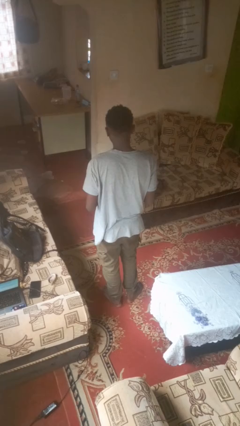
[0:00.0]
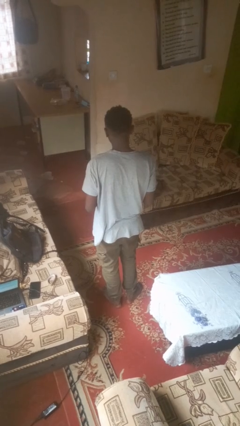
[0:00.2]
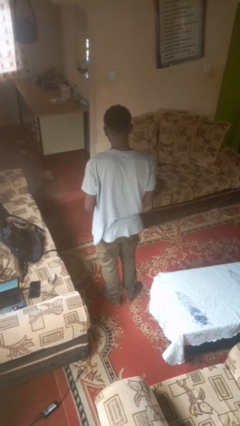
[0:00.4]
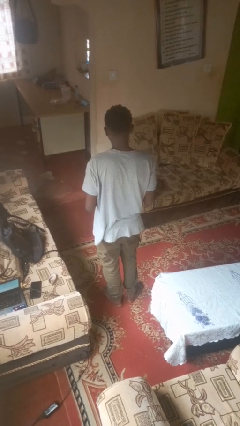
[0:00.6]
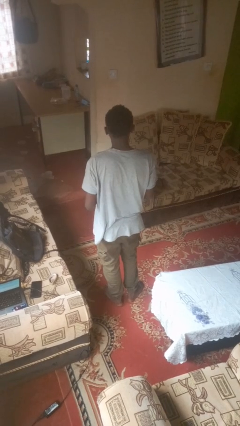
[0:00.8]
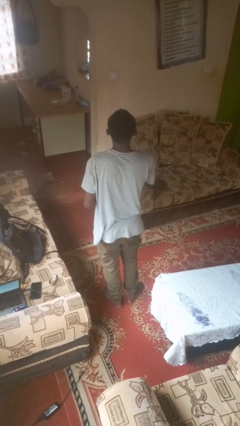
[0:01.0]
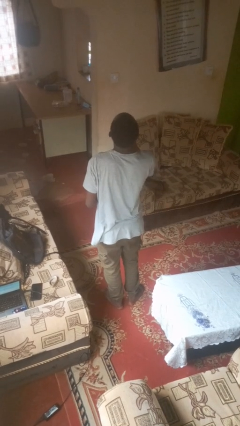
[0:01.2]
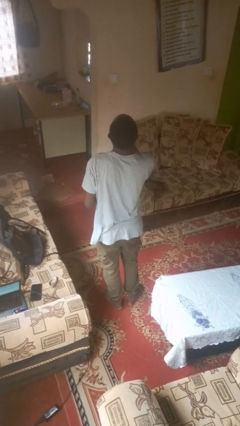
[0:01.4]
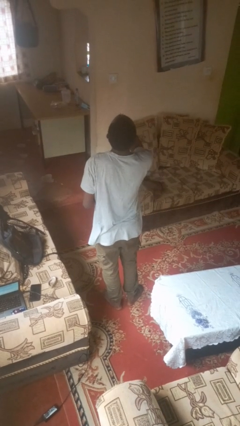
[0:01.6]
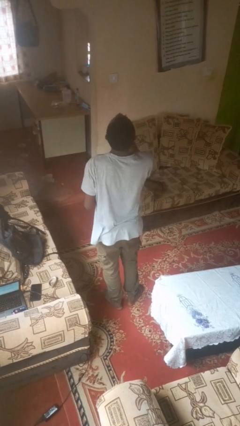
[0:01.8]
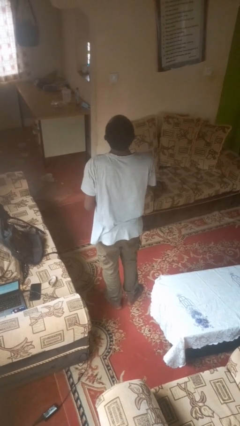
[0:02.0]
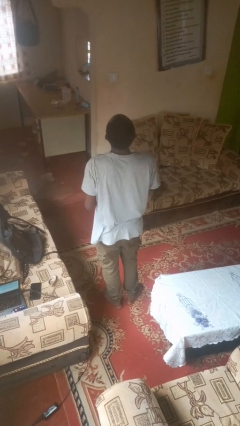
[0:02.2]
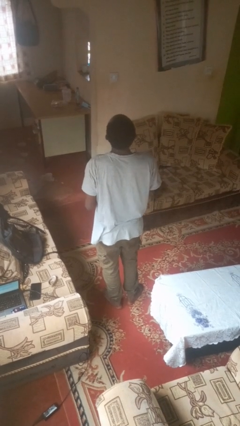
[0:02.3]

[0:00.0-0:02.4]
person takes medicine pills

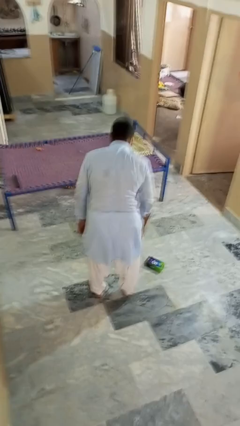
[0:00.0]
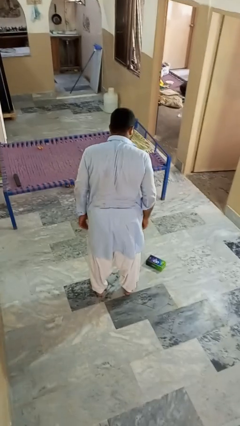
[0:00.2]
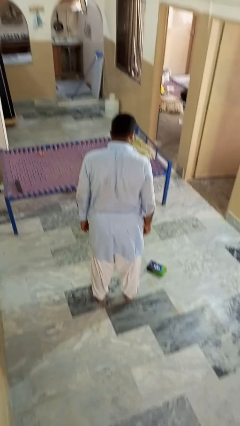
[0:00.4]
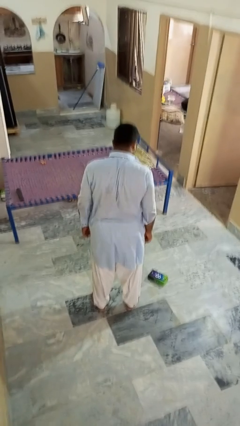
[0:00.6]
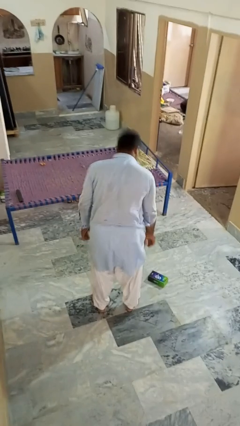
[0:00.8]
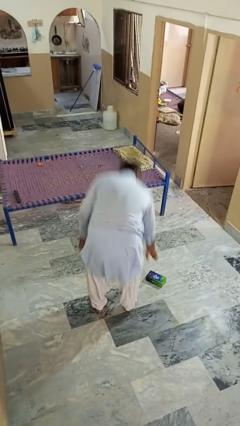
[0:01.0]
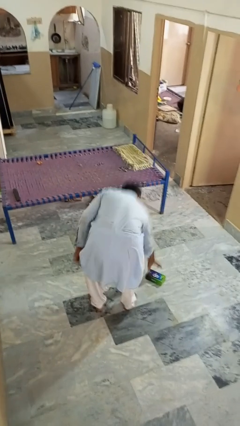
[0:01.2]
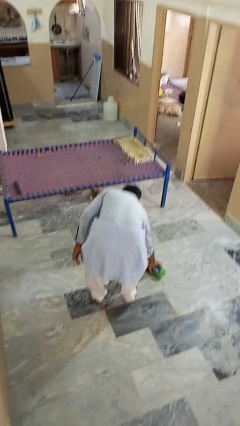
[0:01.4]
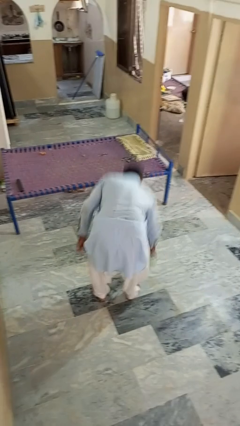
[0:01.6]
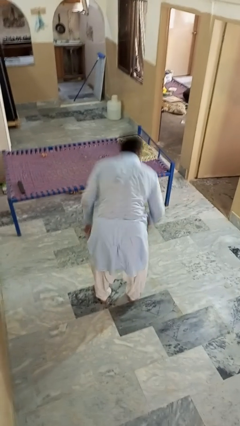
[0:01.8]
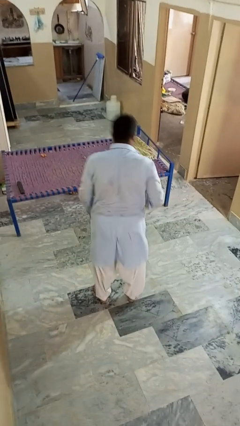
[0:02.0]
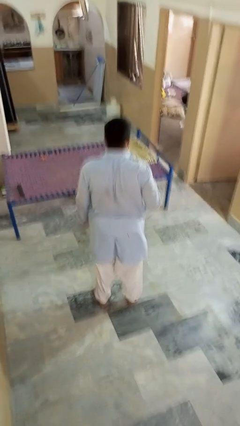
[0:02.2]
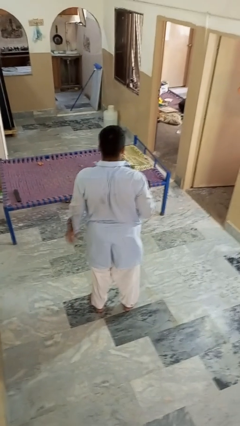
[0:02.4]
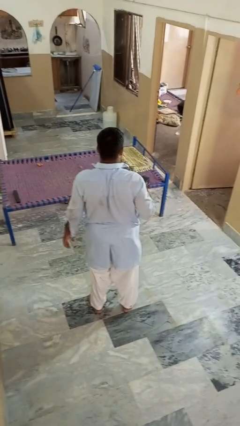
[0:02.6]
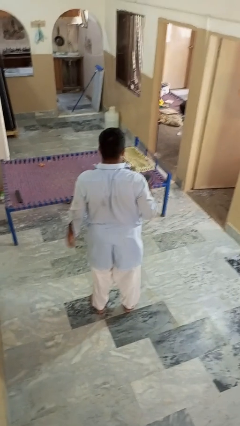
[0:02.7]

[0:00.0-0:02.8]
person picks up object from floor

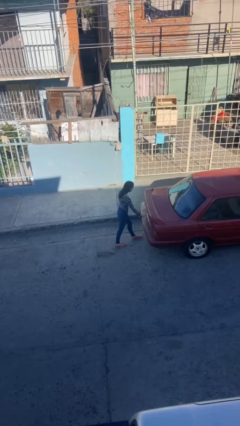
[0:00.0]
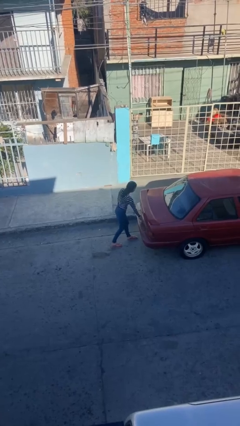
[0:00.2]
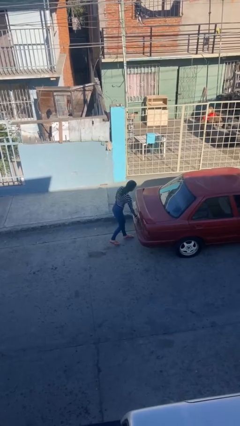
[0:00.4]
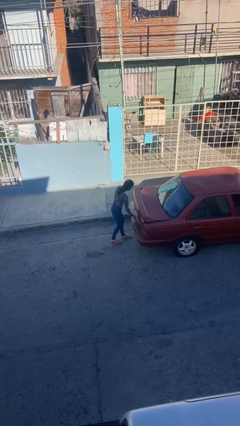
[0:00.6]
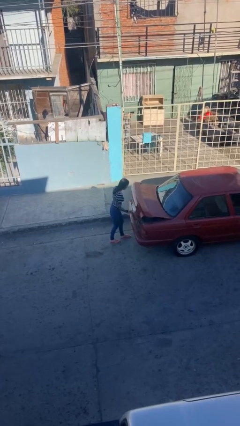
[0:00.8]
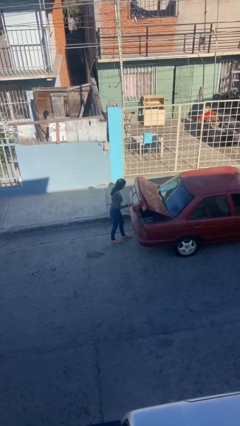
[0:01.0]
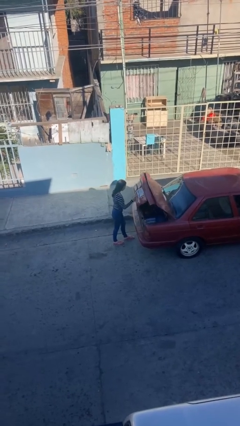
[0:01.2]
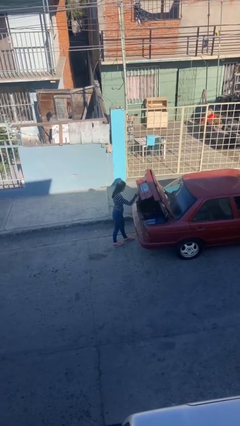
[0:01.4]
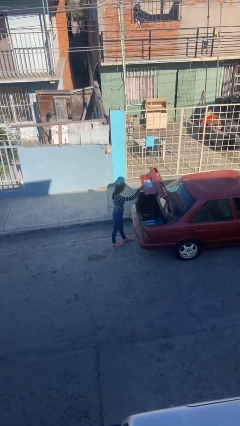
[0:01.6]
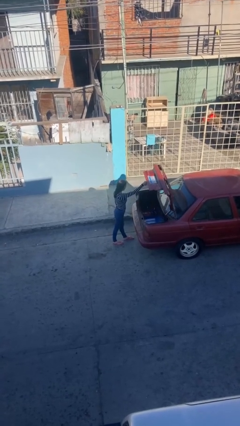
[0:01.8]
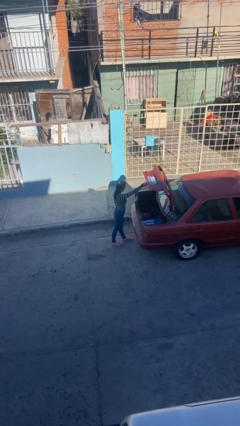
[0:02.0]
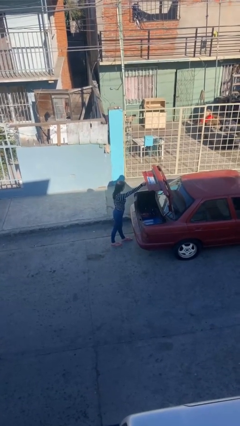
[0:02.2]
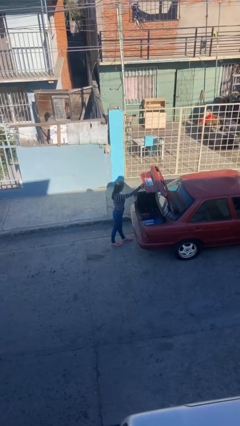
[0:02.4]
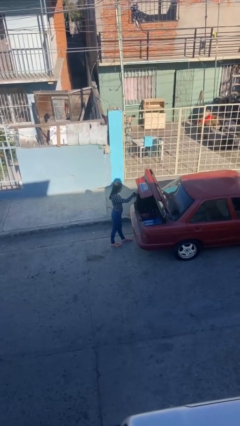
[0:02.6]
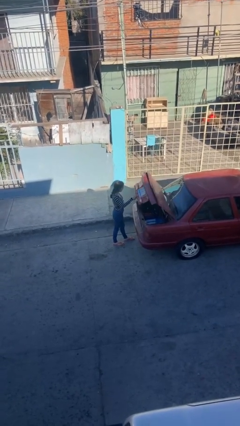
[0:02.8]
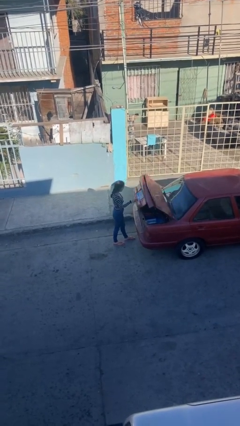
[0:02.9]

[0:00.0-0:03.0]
person opens car trunk

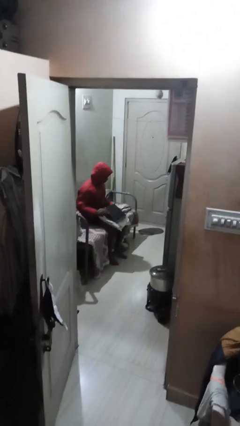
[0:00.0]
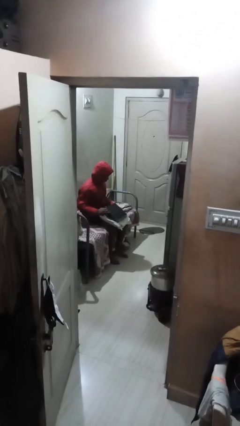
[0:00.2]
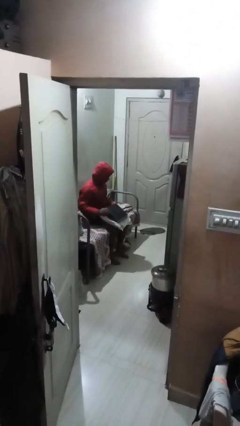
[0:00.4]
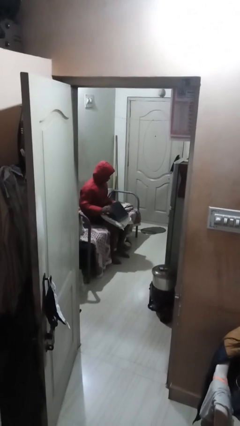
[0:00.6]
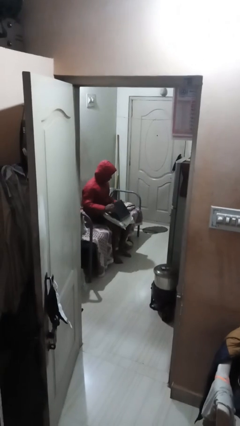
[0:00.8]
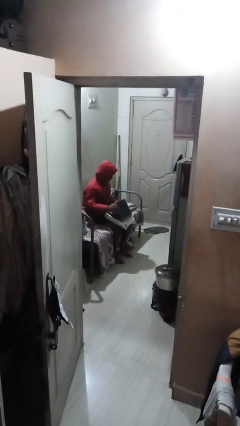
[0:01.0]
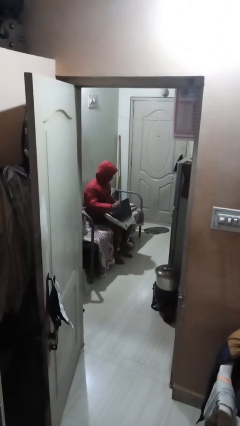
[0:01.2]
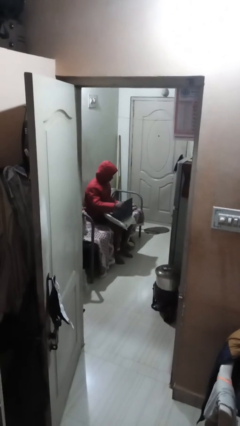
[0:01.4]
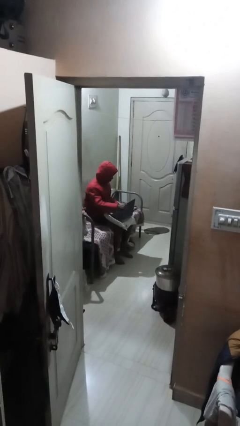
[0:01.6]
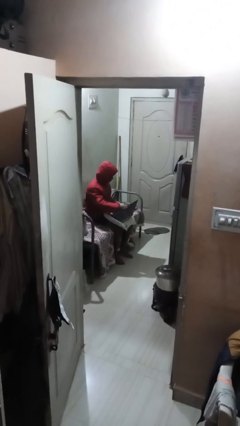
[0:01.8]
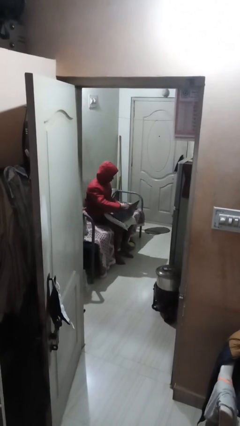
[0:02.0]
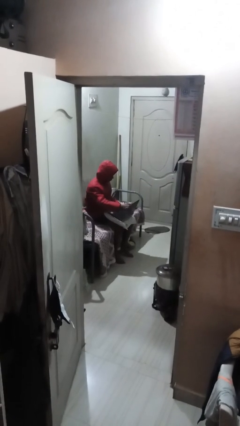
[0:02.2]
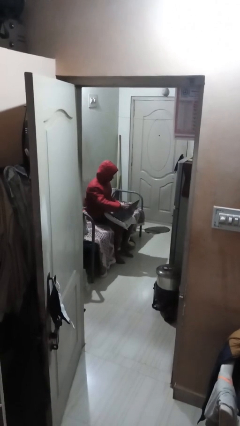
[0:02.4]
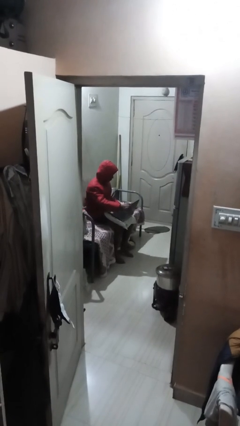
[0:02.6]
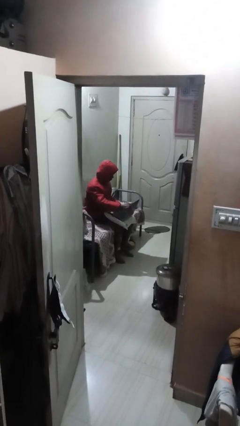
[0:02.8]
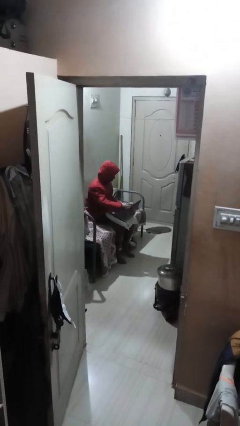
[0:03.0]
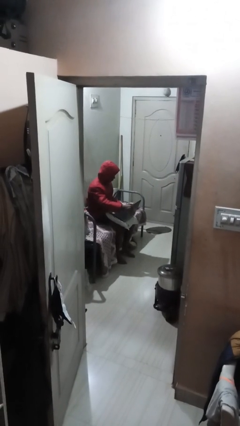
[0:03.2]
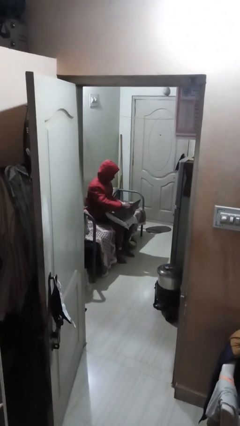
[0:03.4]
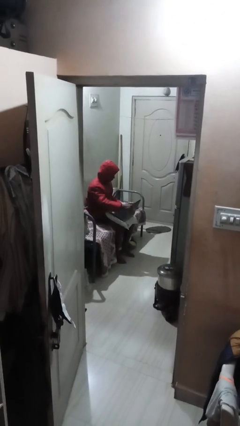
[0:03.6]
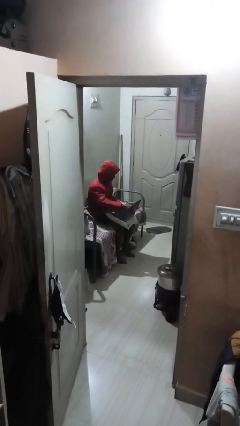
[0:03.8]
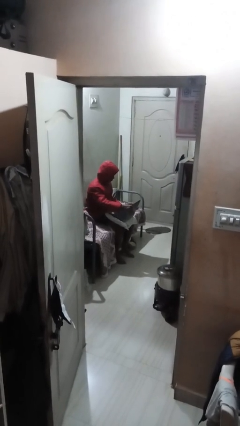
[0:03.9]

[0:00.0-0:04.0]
person interacts with laptop

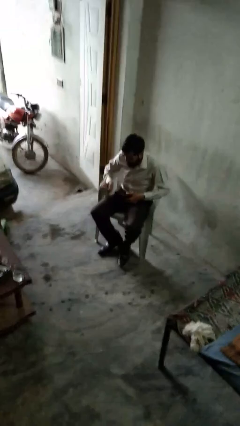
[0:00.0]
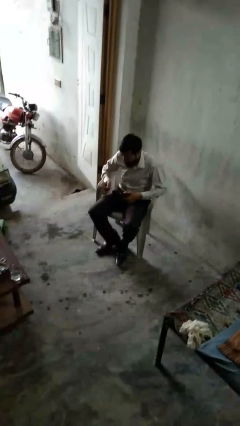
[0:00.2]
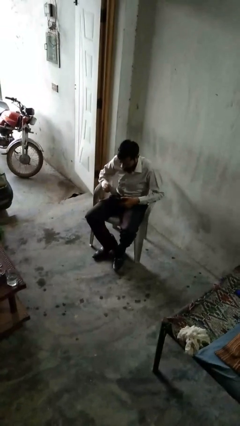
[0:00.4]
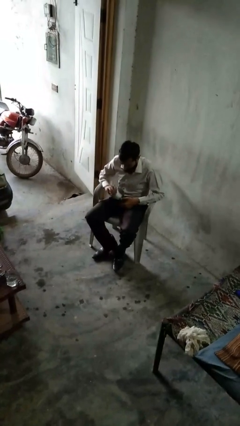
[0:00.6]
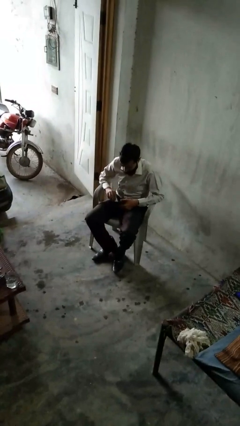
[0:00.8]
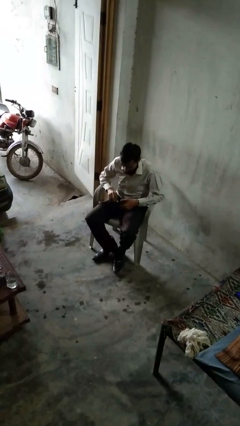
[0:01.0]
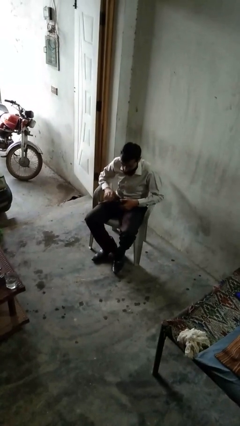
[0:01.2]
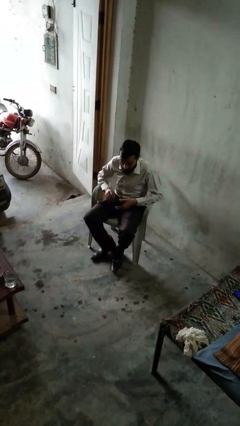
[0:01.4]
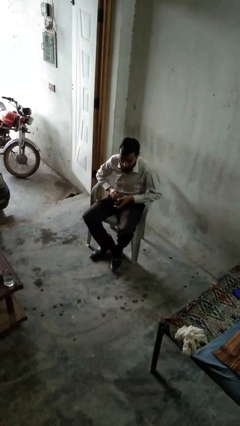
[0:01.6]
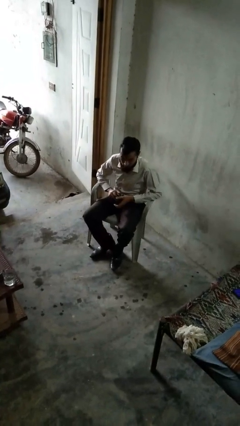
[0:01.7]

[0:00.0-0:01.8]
person puts object into purse

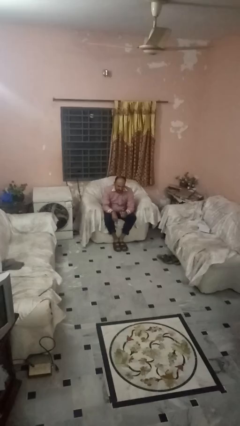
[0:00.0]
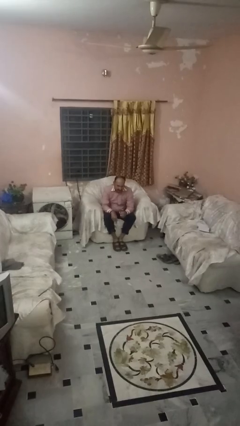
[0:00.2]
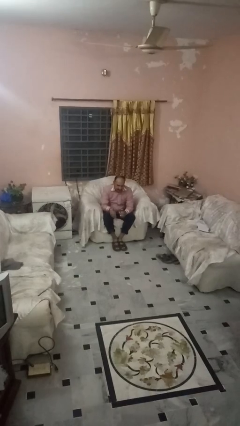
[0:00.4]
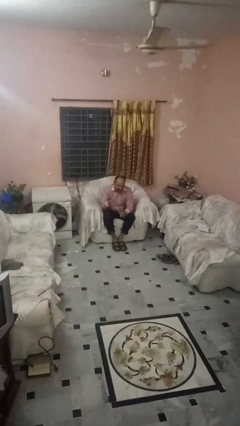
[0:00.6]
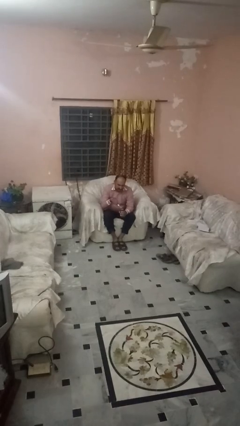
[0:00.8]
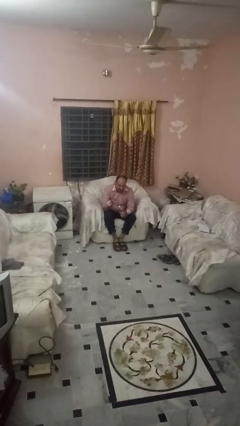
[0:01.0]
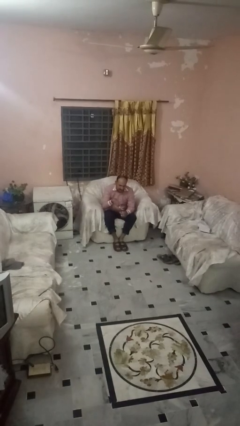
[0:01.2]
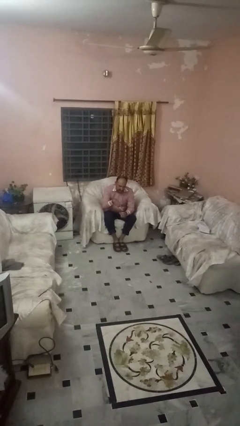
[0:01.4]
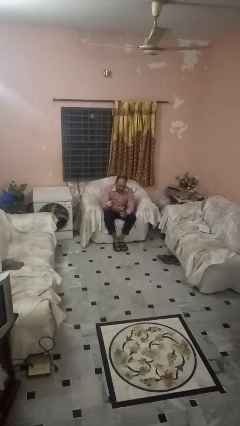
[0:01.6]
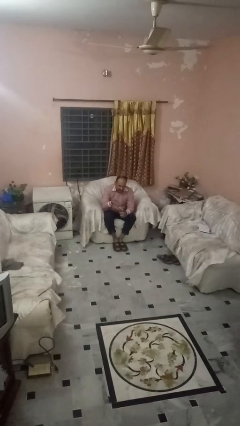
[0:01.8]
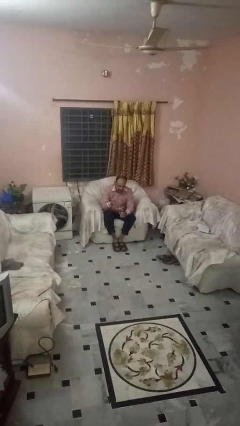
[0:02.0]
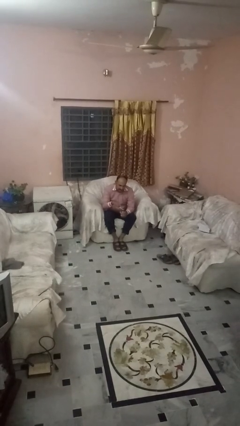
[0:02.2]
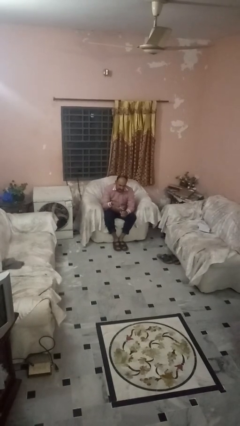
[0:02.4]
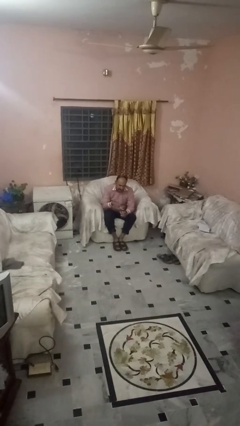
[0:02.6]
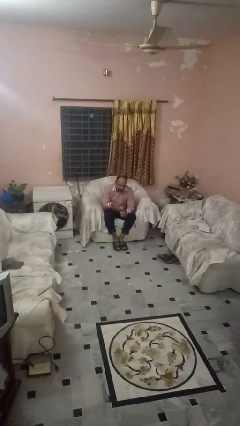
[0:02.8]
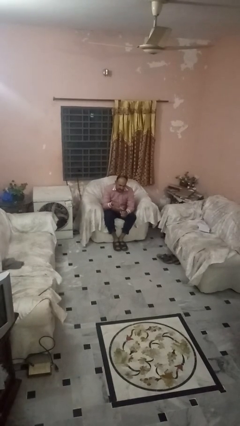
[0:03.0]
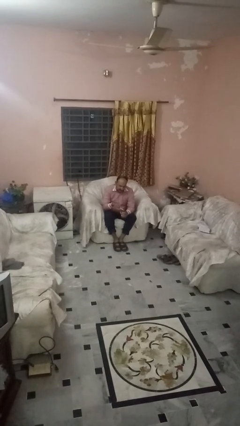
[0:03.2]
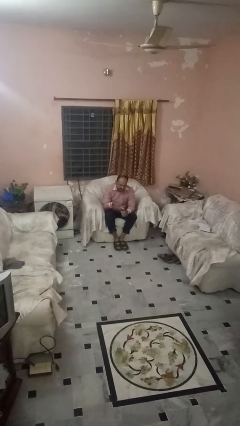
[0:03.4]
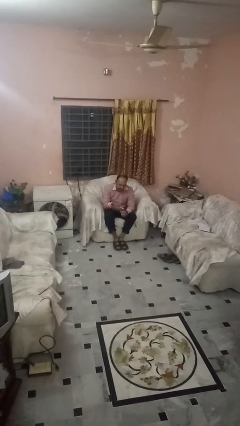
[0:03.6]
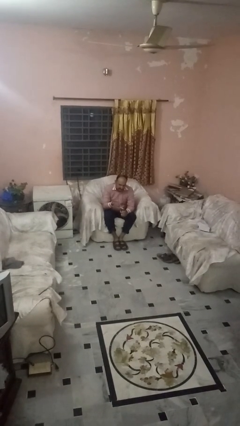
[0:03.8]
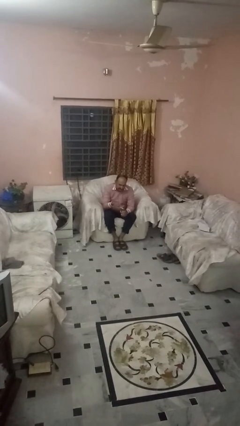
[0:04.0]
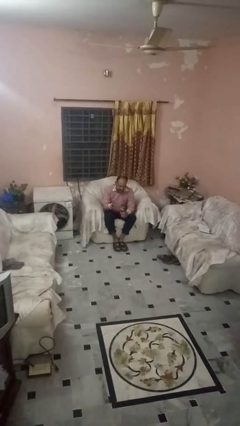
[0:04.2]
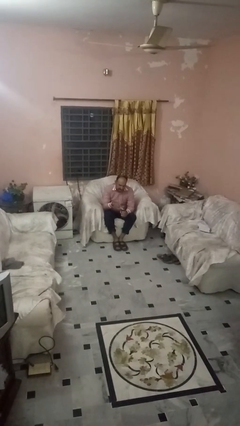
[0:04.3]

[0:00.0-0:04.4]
person opens can with can opener
